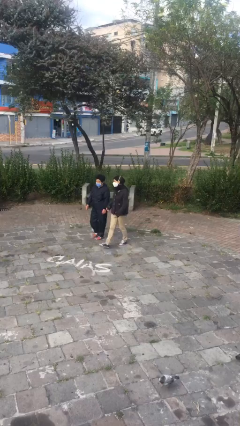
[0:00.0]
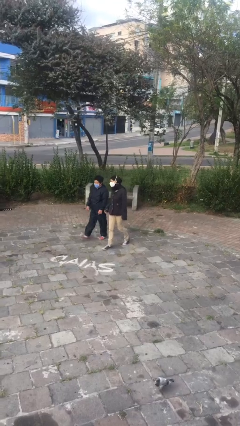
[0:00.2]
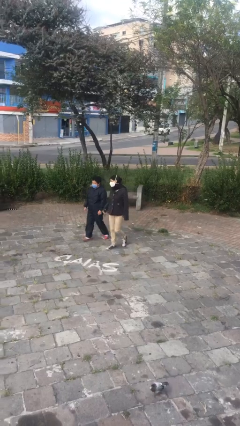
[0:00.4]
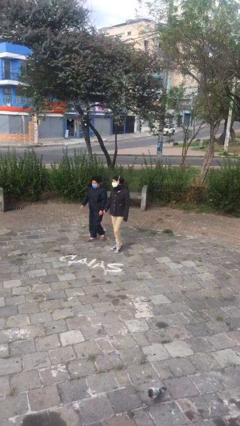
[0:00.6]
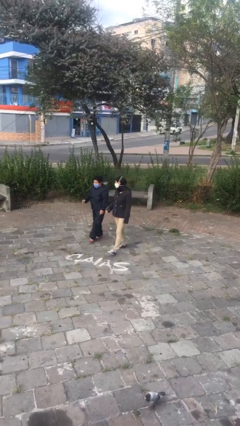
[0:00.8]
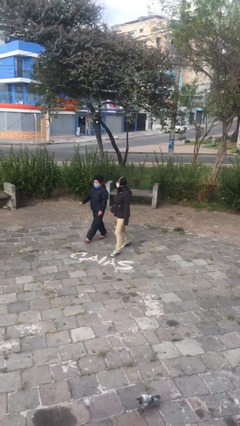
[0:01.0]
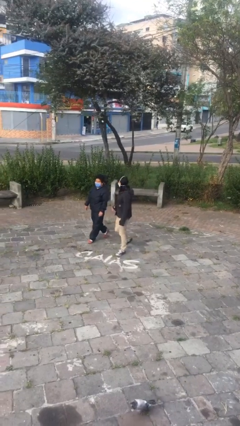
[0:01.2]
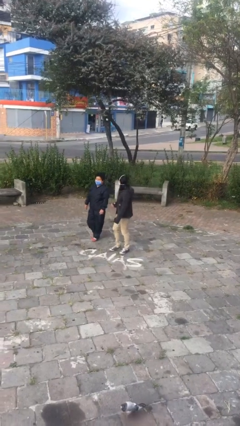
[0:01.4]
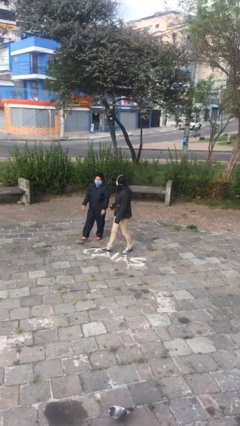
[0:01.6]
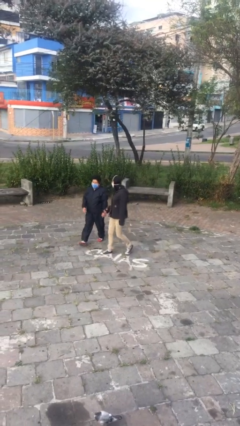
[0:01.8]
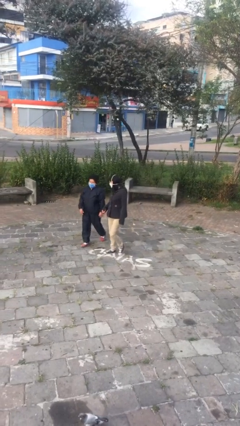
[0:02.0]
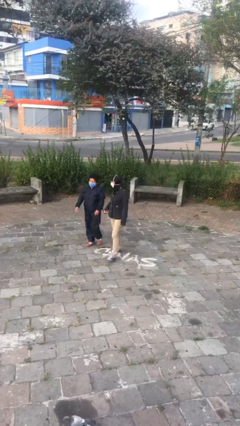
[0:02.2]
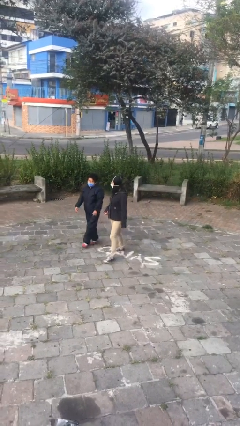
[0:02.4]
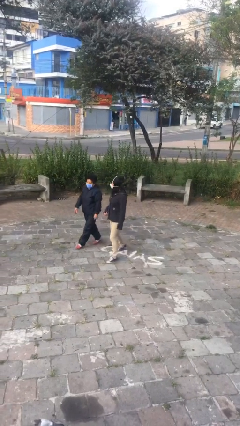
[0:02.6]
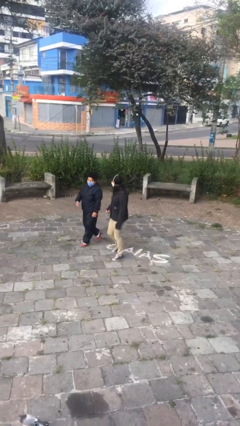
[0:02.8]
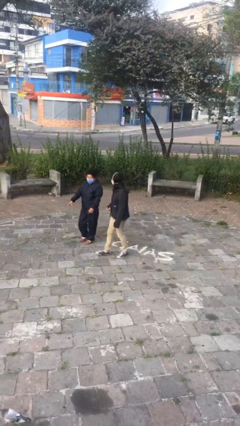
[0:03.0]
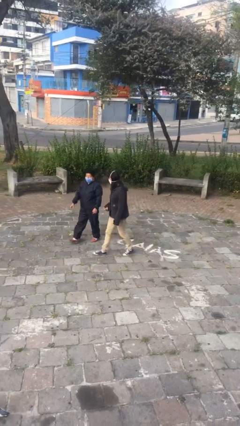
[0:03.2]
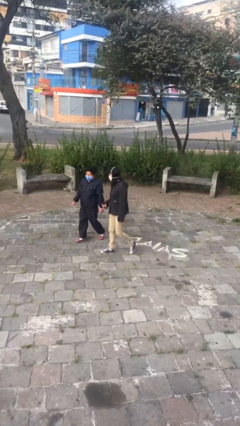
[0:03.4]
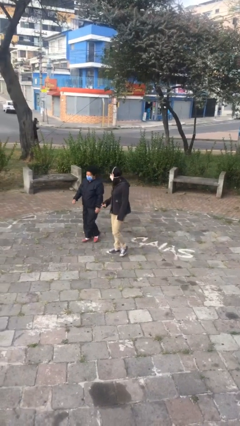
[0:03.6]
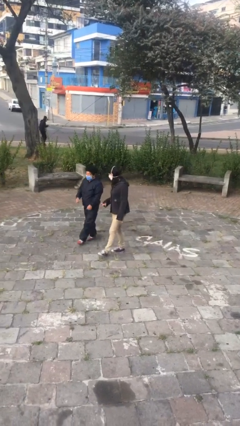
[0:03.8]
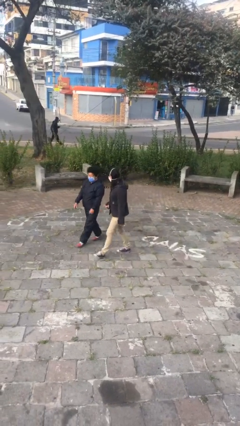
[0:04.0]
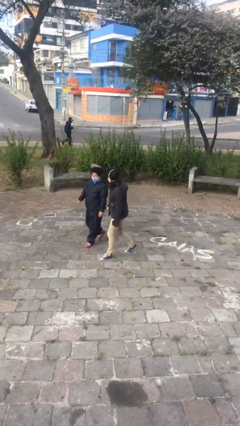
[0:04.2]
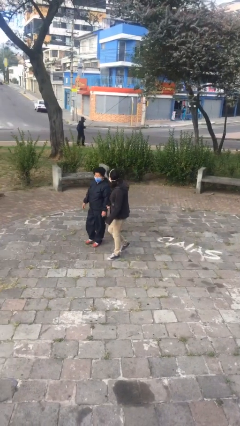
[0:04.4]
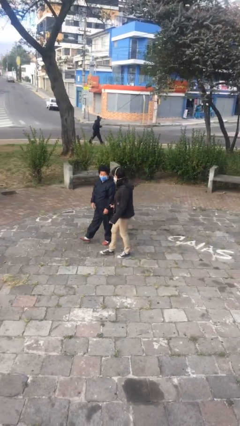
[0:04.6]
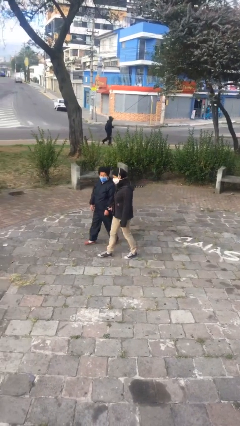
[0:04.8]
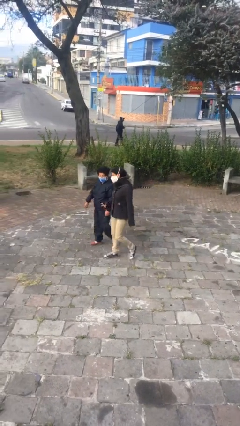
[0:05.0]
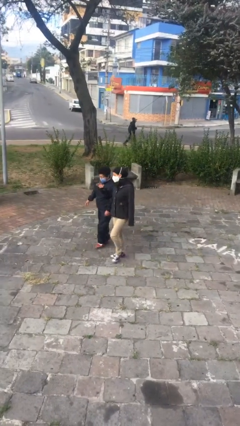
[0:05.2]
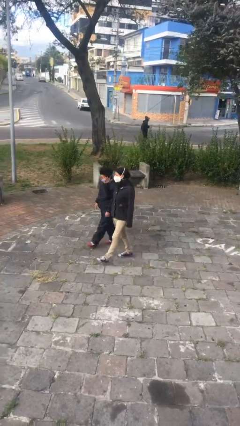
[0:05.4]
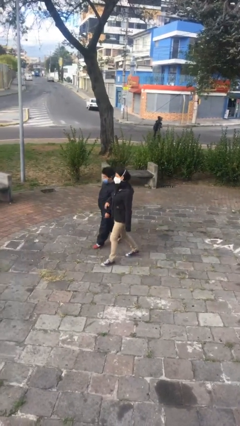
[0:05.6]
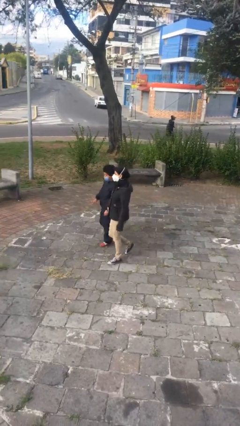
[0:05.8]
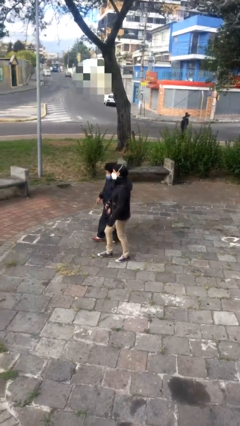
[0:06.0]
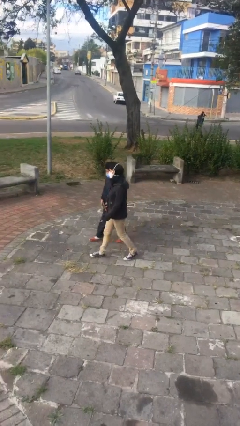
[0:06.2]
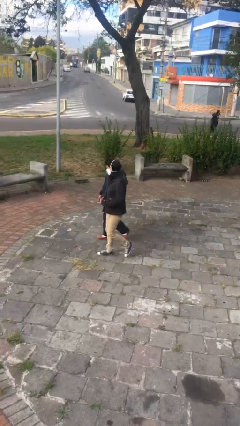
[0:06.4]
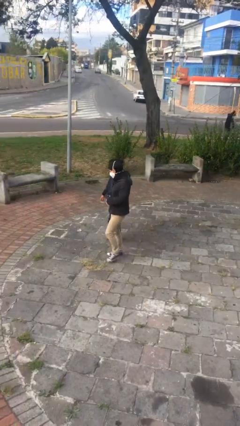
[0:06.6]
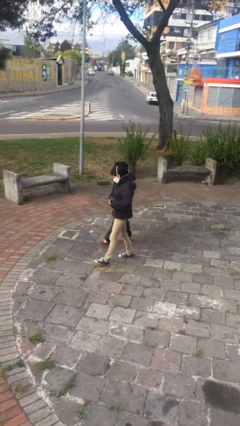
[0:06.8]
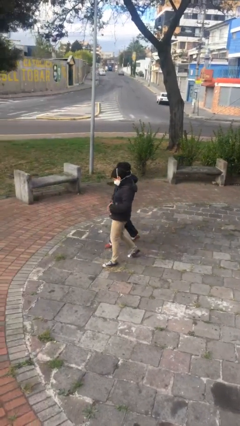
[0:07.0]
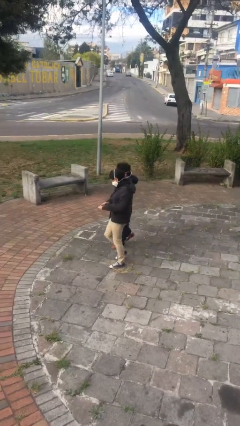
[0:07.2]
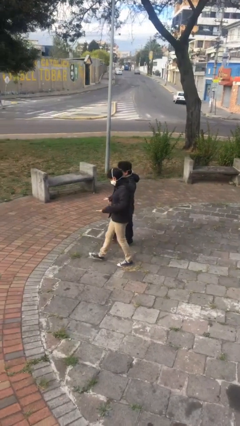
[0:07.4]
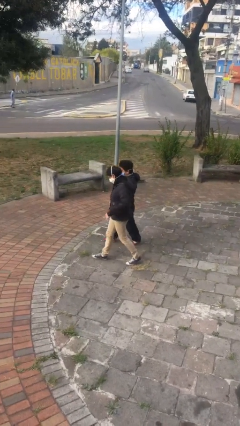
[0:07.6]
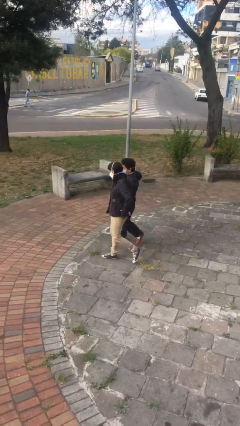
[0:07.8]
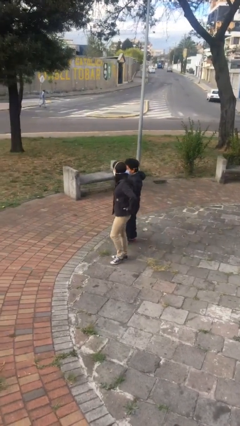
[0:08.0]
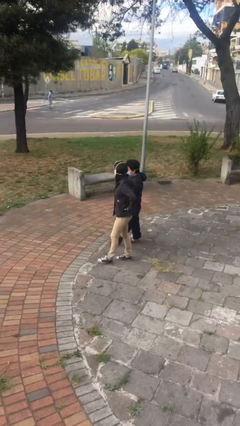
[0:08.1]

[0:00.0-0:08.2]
person talks to person

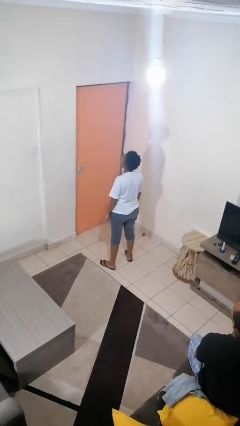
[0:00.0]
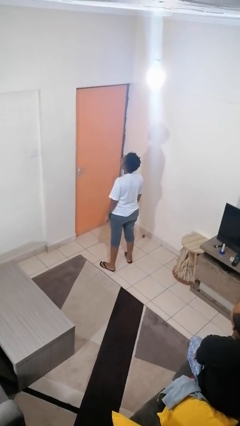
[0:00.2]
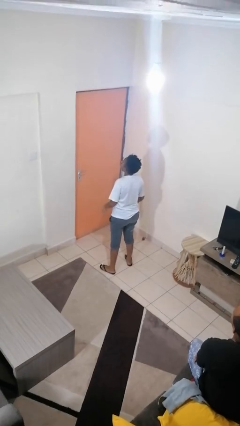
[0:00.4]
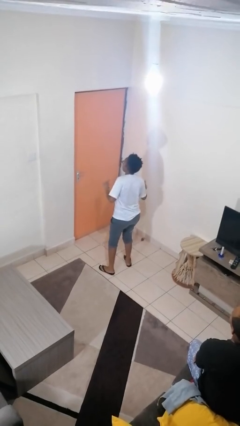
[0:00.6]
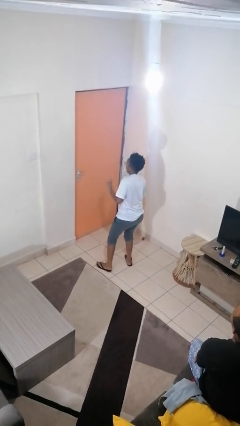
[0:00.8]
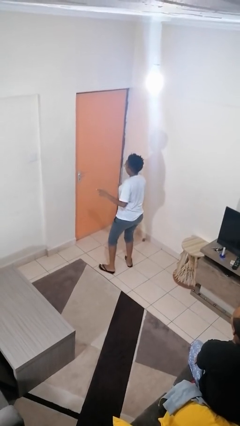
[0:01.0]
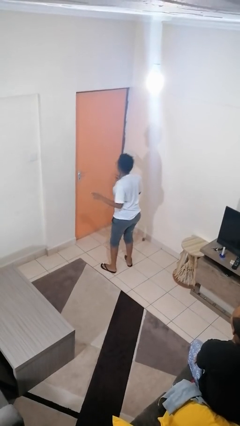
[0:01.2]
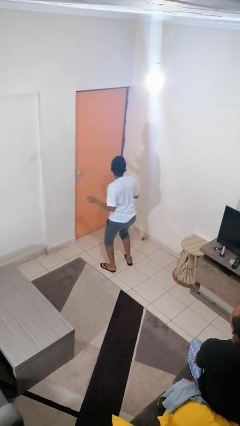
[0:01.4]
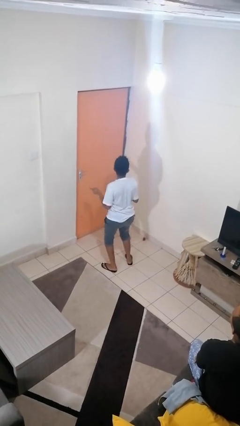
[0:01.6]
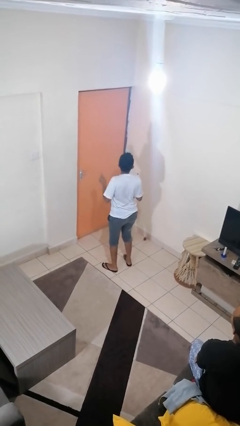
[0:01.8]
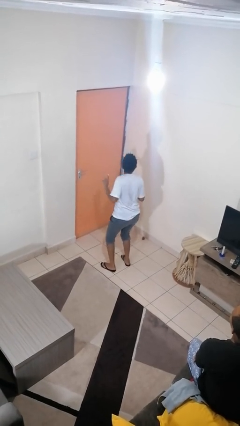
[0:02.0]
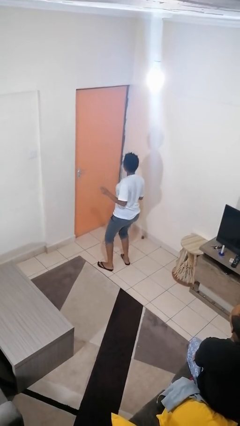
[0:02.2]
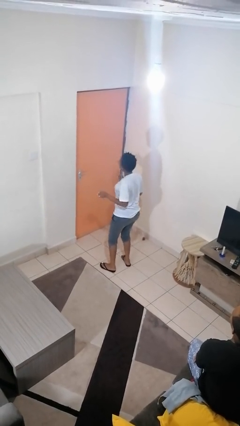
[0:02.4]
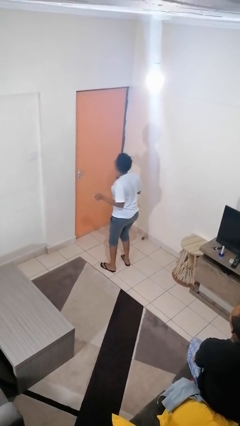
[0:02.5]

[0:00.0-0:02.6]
person dances in place

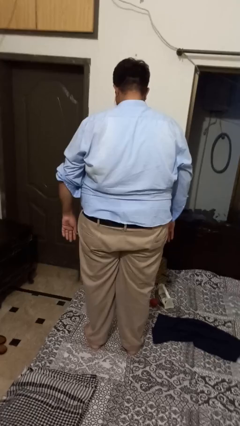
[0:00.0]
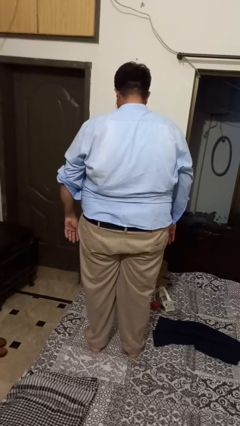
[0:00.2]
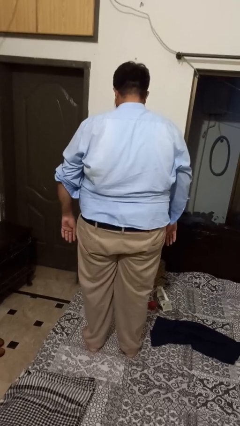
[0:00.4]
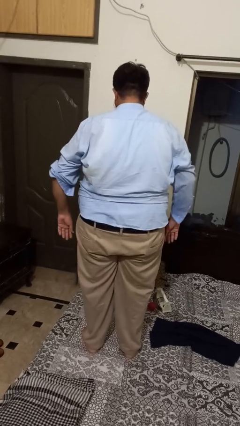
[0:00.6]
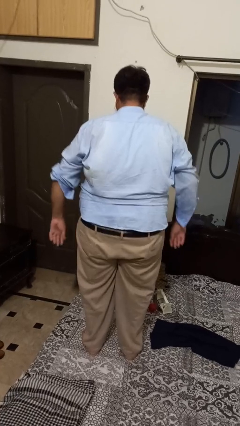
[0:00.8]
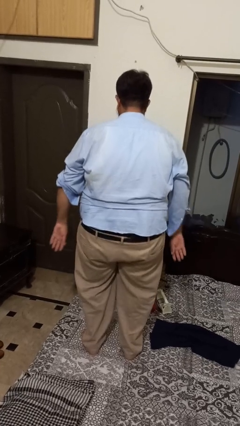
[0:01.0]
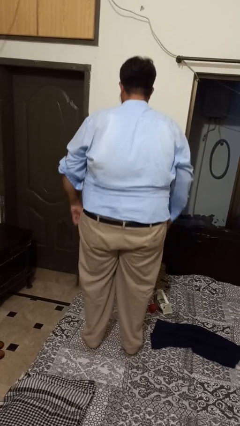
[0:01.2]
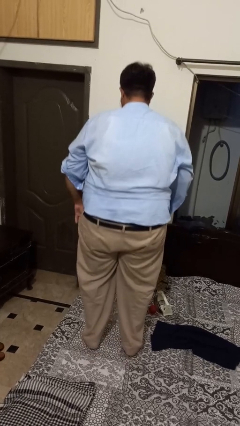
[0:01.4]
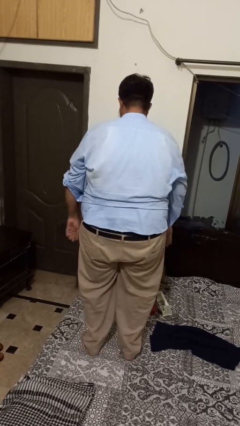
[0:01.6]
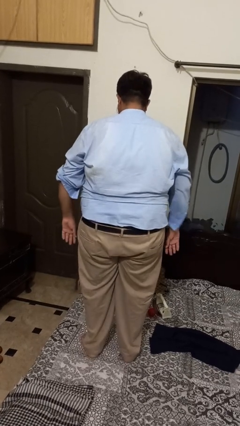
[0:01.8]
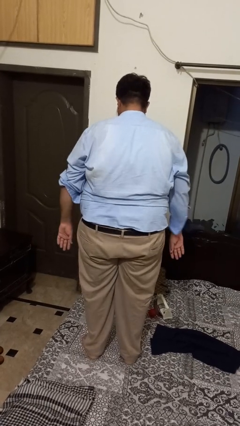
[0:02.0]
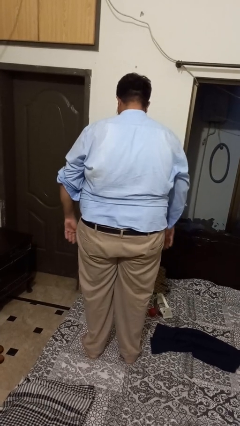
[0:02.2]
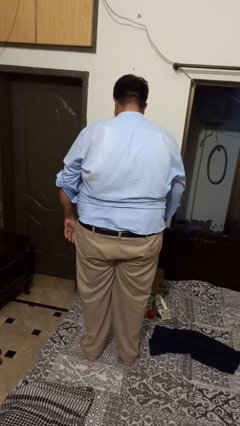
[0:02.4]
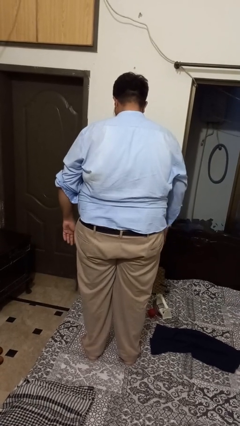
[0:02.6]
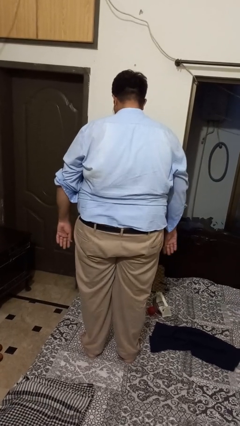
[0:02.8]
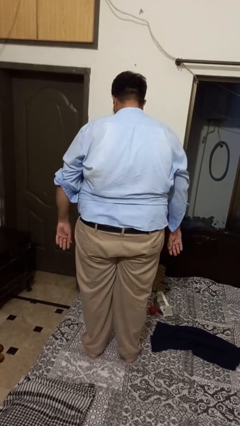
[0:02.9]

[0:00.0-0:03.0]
person jumps on bed

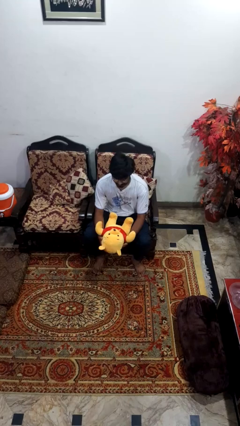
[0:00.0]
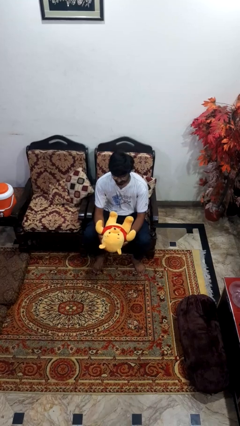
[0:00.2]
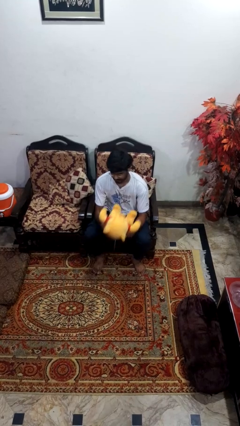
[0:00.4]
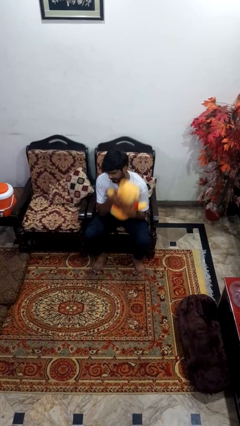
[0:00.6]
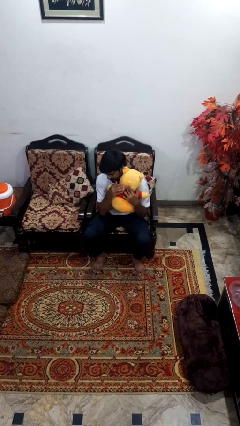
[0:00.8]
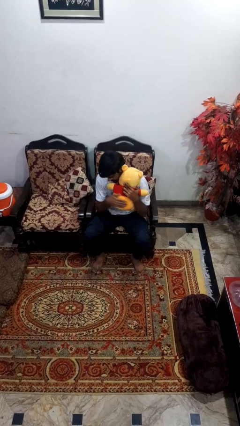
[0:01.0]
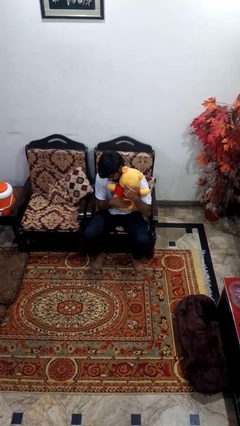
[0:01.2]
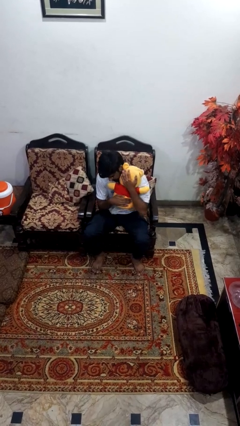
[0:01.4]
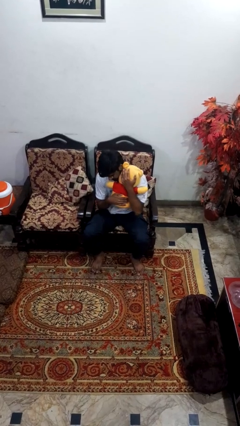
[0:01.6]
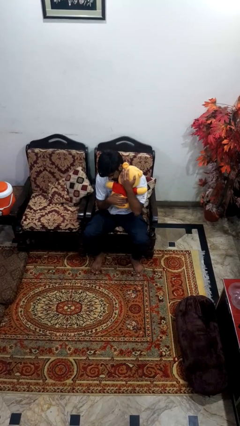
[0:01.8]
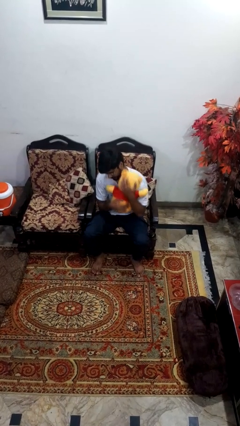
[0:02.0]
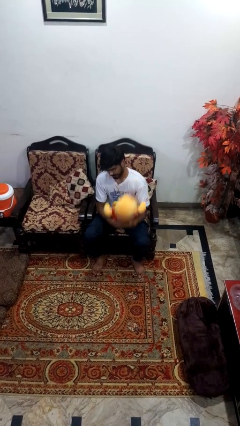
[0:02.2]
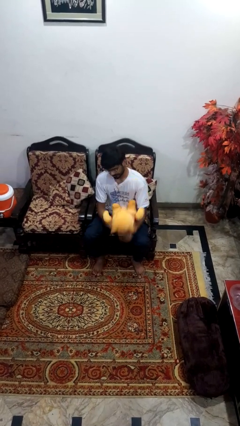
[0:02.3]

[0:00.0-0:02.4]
person hugs stuffed animal

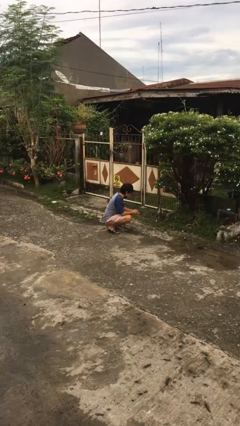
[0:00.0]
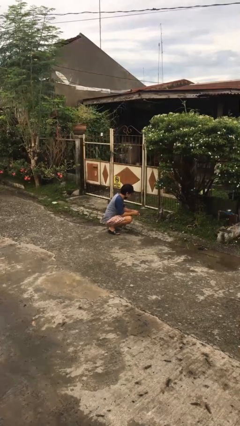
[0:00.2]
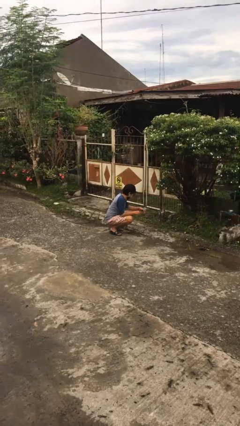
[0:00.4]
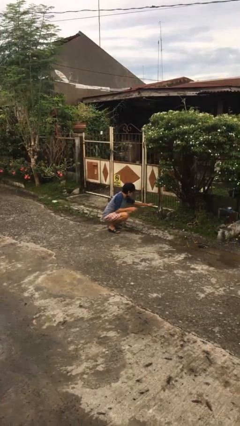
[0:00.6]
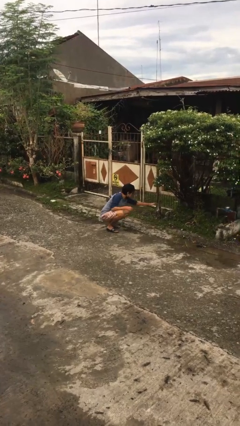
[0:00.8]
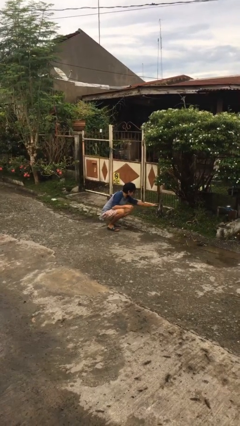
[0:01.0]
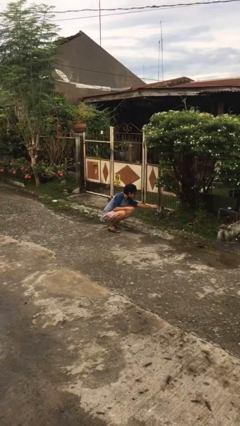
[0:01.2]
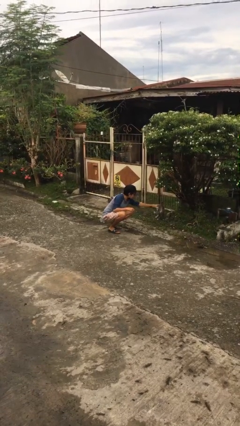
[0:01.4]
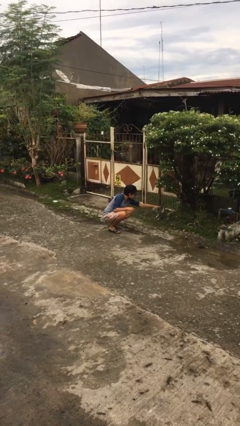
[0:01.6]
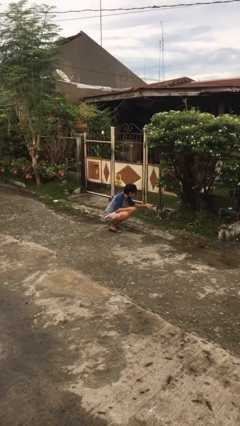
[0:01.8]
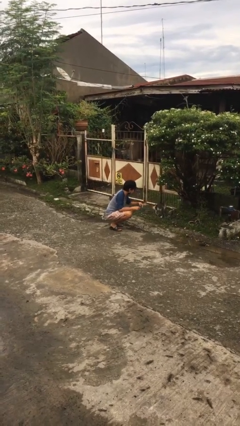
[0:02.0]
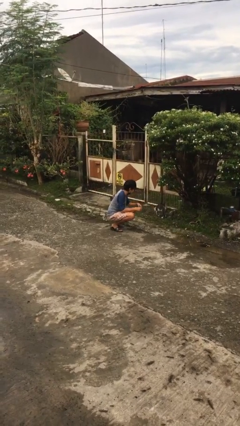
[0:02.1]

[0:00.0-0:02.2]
person pets cat
